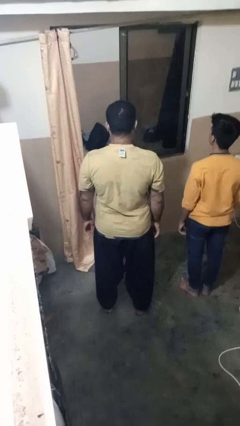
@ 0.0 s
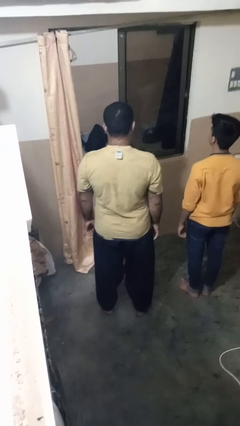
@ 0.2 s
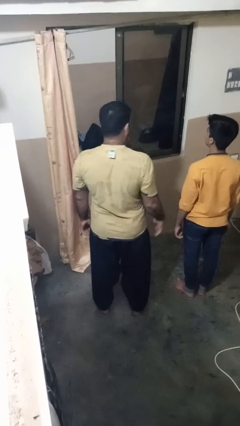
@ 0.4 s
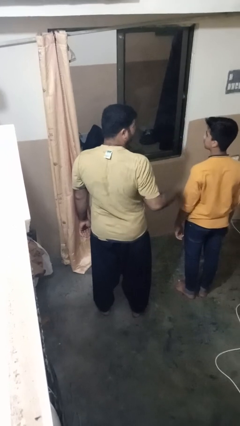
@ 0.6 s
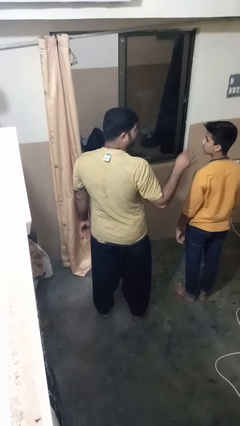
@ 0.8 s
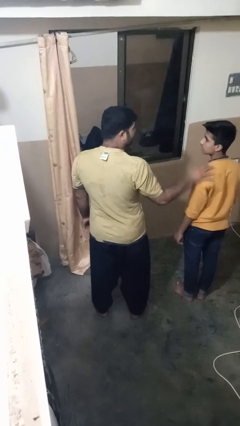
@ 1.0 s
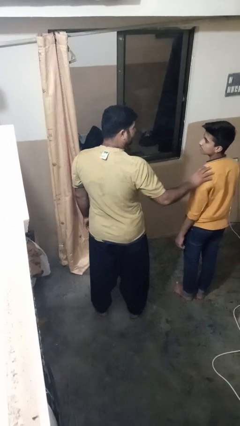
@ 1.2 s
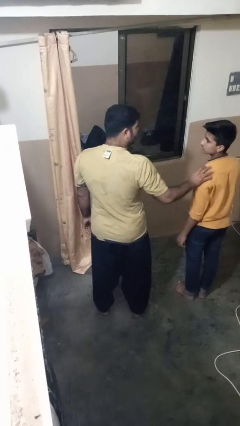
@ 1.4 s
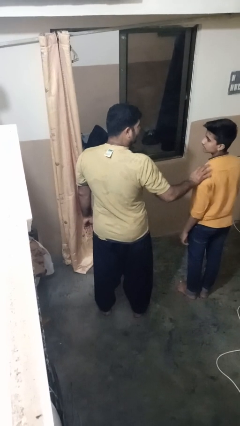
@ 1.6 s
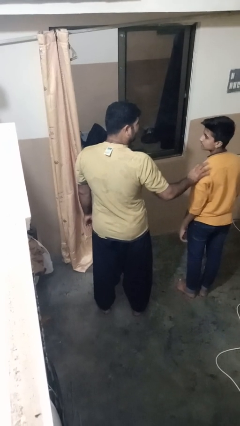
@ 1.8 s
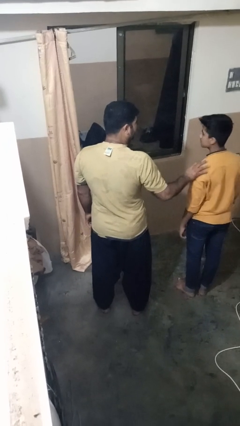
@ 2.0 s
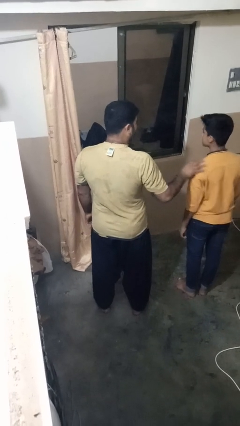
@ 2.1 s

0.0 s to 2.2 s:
person pounds shoulders of person

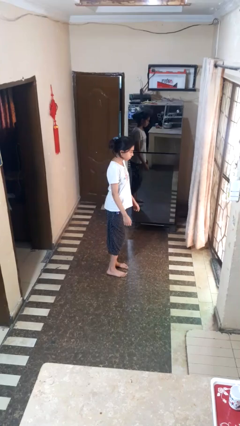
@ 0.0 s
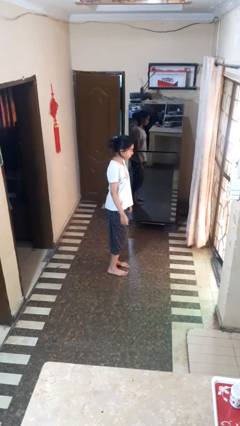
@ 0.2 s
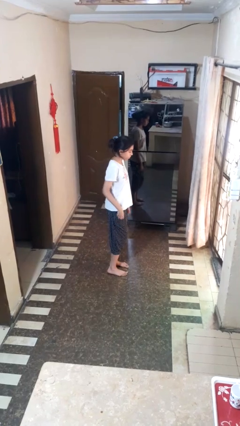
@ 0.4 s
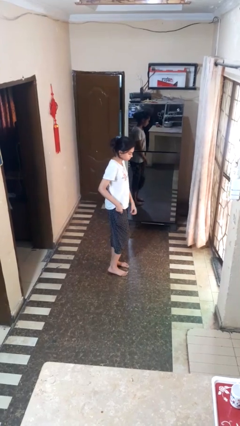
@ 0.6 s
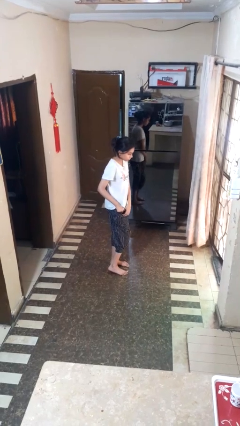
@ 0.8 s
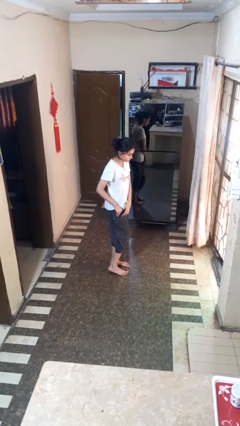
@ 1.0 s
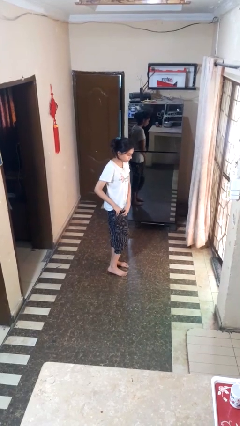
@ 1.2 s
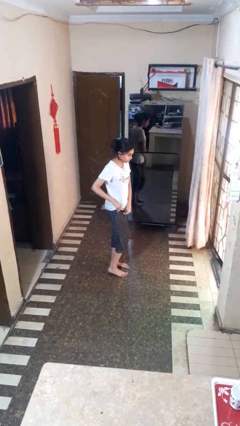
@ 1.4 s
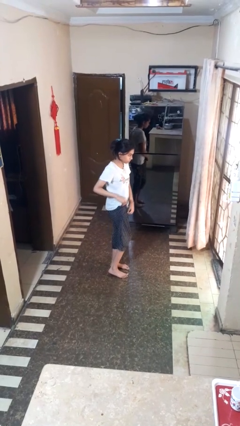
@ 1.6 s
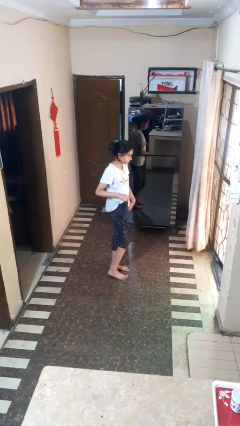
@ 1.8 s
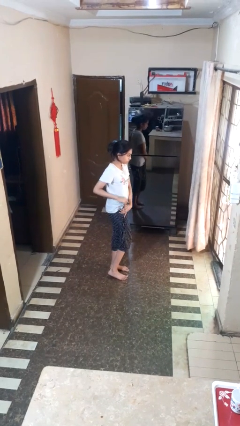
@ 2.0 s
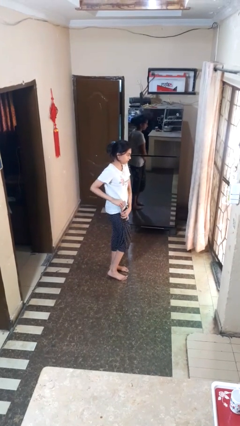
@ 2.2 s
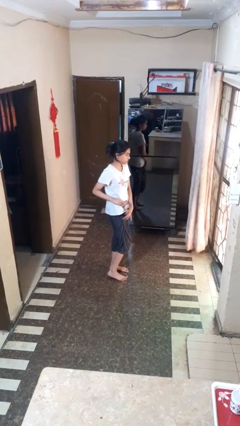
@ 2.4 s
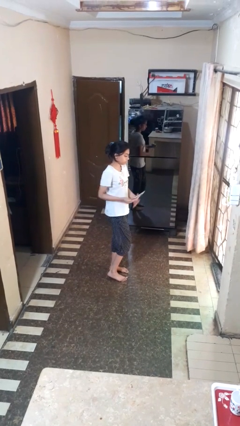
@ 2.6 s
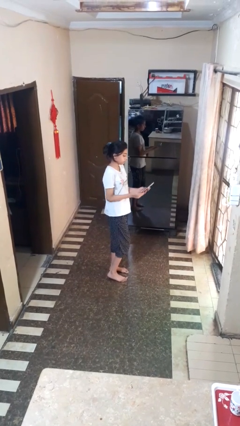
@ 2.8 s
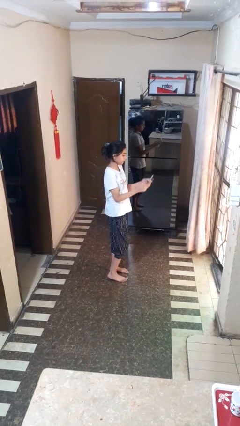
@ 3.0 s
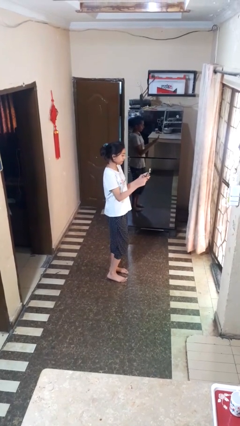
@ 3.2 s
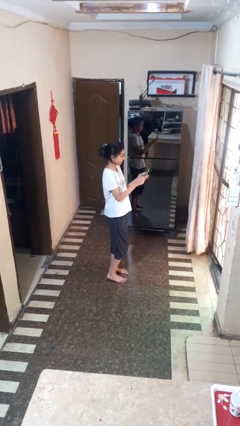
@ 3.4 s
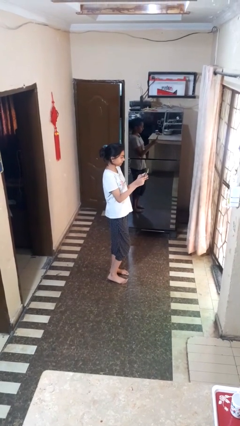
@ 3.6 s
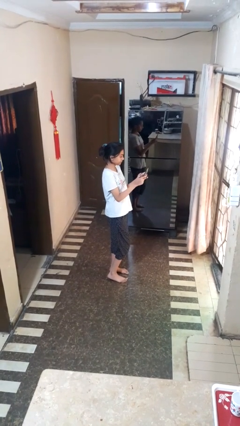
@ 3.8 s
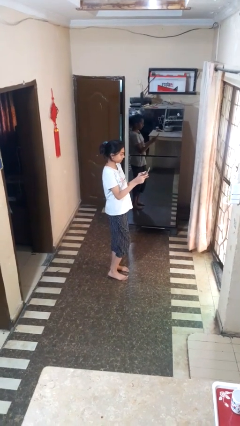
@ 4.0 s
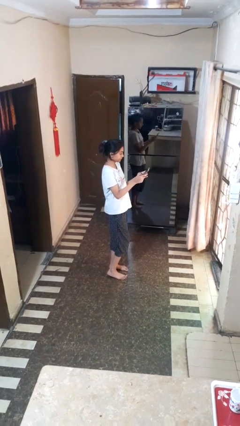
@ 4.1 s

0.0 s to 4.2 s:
person takes phone from pocket

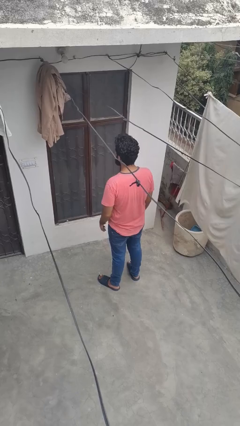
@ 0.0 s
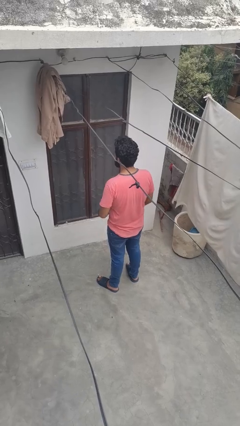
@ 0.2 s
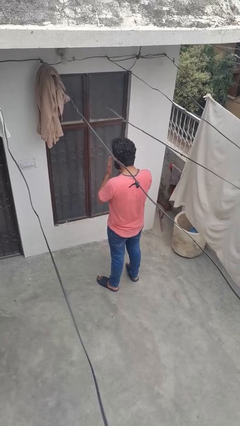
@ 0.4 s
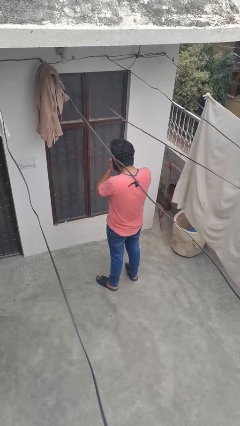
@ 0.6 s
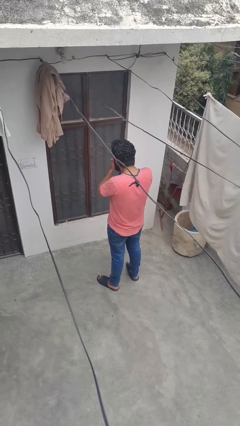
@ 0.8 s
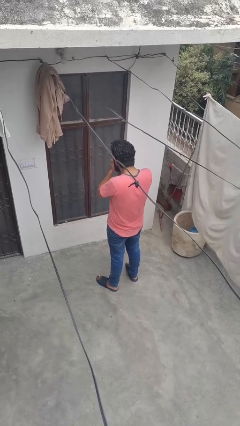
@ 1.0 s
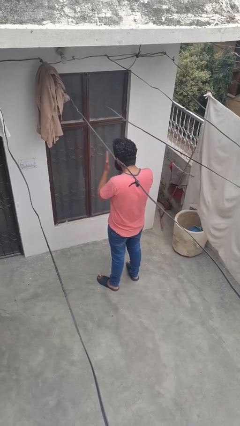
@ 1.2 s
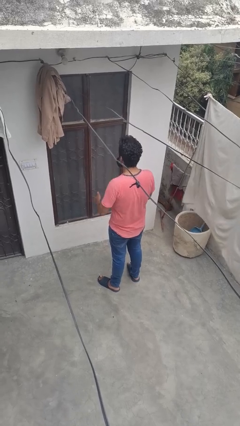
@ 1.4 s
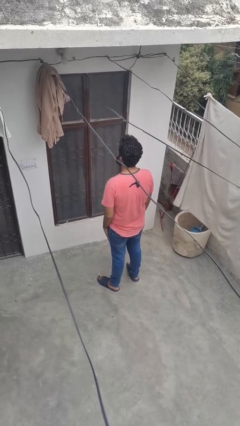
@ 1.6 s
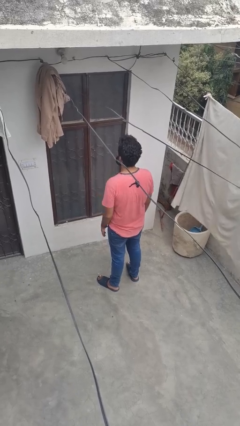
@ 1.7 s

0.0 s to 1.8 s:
person covers face with hands

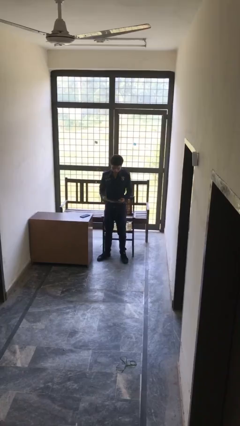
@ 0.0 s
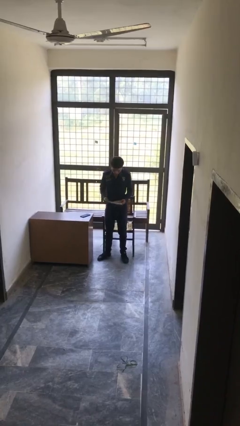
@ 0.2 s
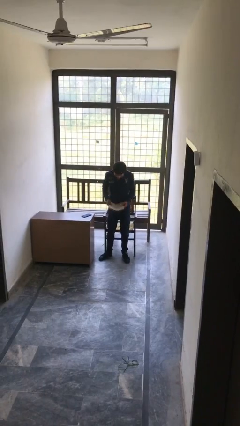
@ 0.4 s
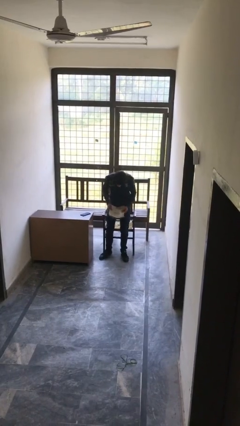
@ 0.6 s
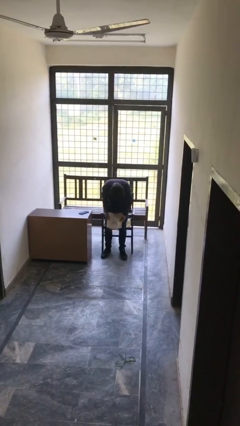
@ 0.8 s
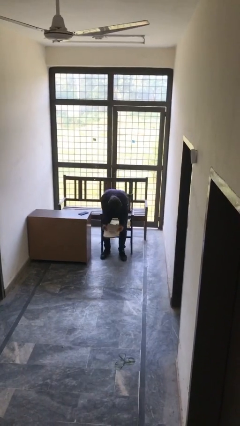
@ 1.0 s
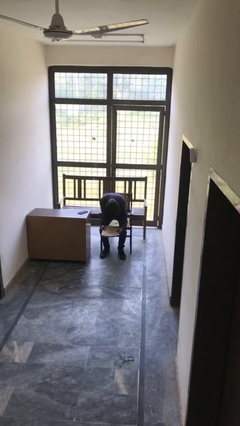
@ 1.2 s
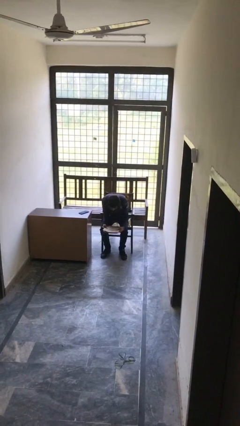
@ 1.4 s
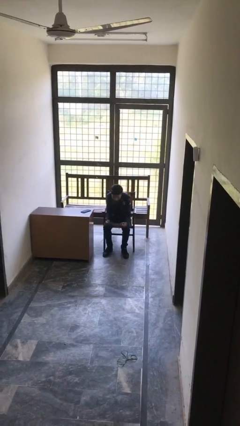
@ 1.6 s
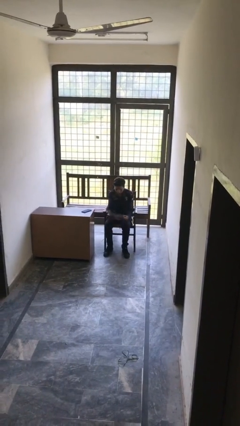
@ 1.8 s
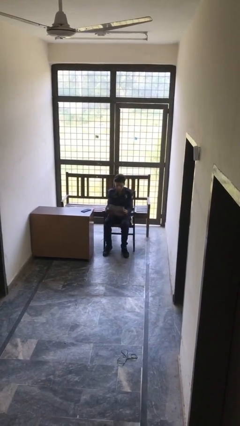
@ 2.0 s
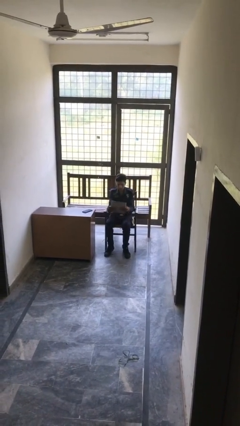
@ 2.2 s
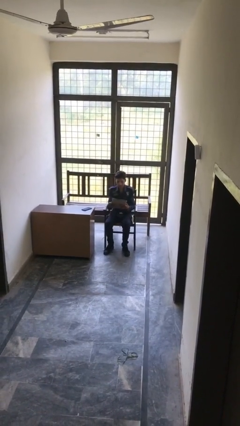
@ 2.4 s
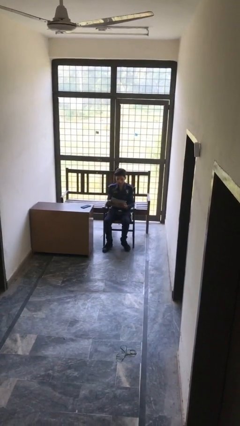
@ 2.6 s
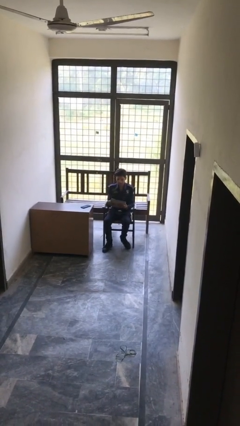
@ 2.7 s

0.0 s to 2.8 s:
person sits down

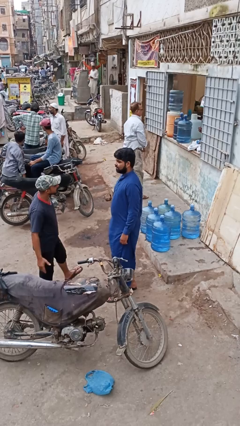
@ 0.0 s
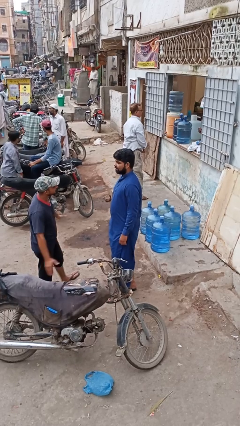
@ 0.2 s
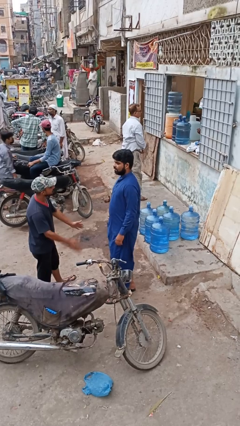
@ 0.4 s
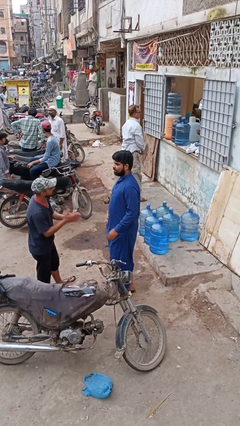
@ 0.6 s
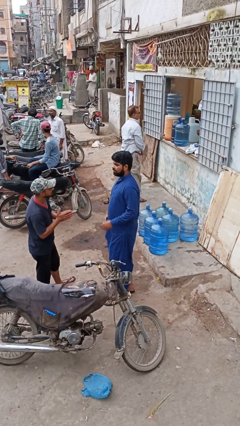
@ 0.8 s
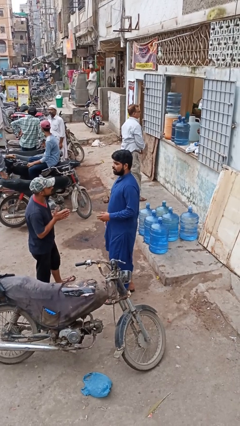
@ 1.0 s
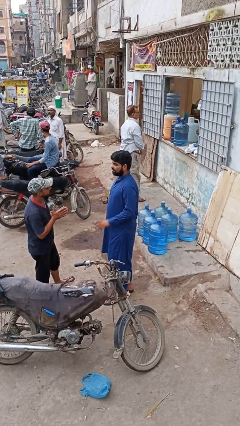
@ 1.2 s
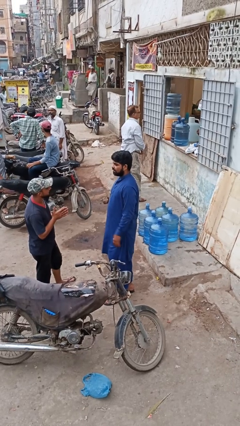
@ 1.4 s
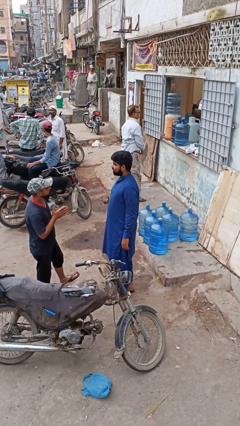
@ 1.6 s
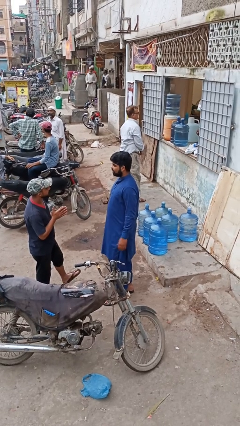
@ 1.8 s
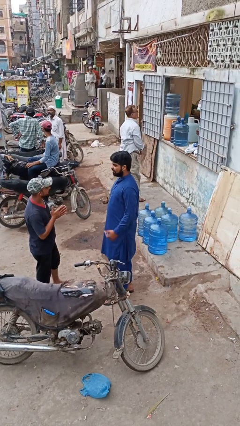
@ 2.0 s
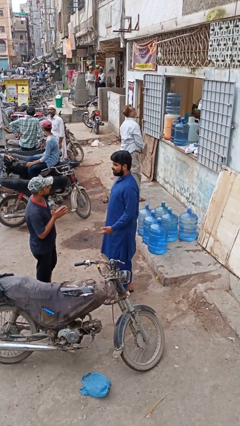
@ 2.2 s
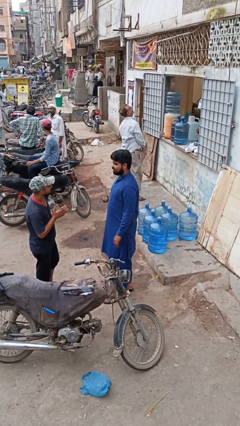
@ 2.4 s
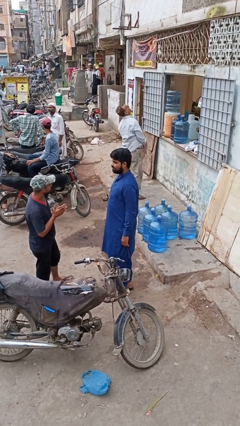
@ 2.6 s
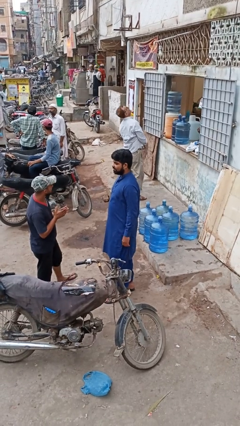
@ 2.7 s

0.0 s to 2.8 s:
person talks to person

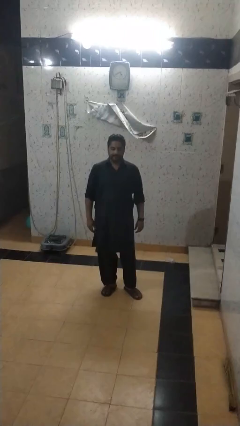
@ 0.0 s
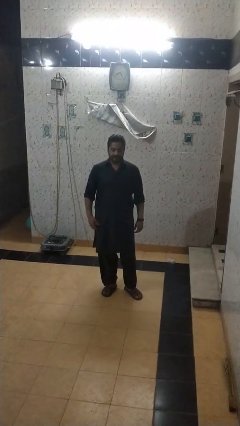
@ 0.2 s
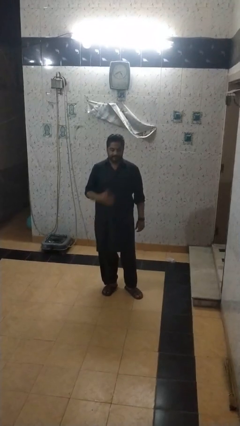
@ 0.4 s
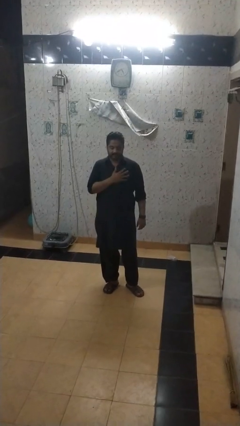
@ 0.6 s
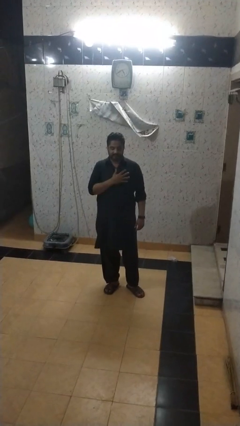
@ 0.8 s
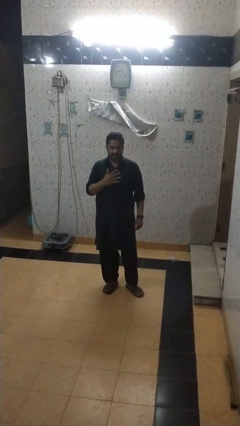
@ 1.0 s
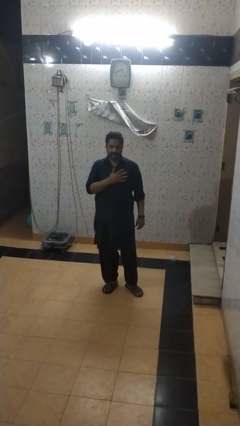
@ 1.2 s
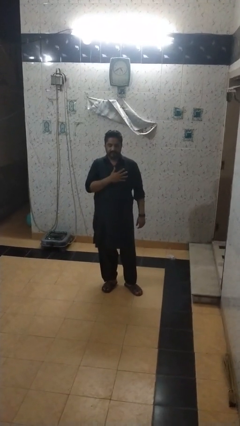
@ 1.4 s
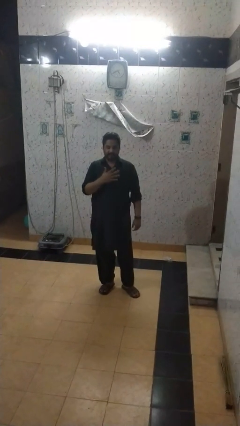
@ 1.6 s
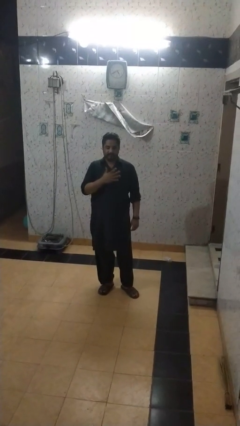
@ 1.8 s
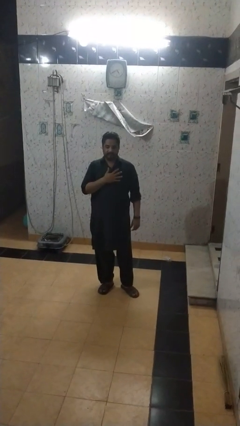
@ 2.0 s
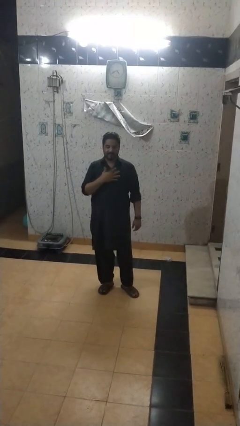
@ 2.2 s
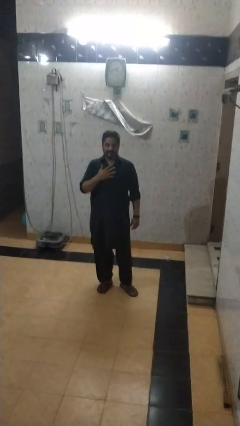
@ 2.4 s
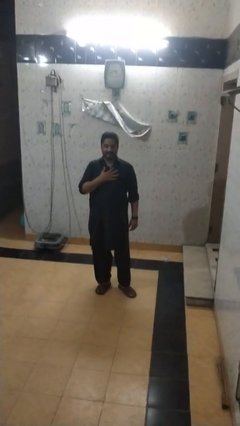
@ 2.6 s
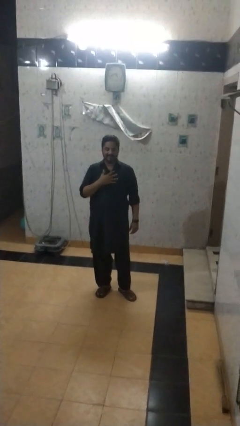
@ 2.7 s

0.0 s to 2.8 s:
person drums on chest

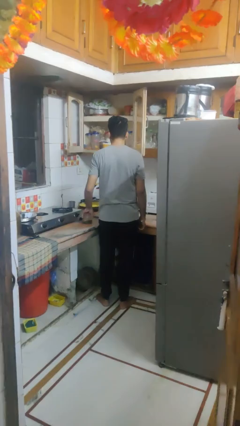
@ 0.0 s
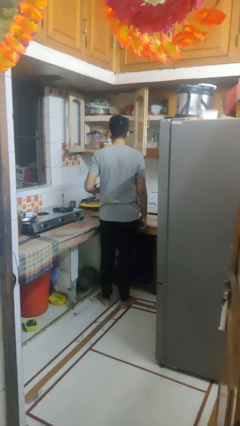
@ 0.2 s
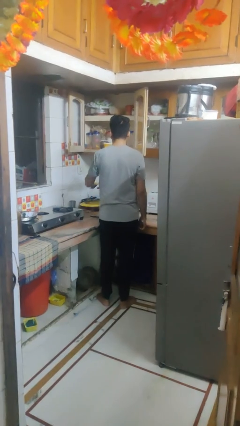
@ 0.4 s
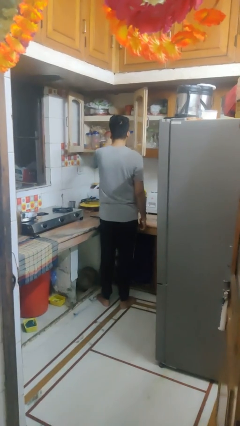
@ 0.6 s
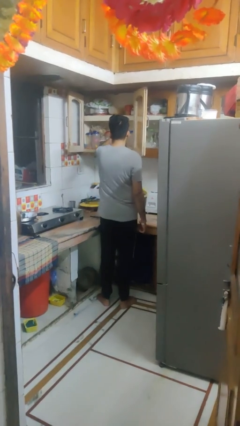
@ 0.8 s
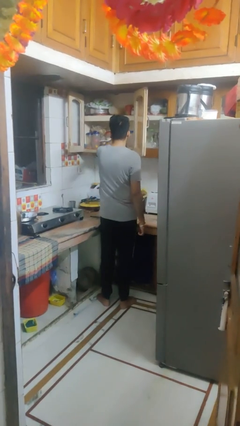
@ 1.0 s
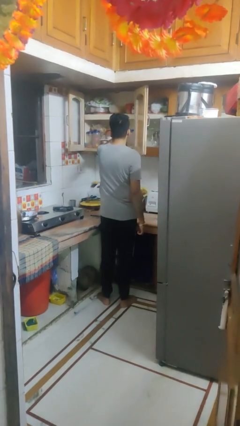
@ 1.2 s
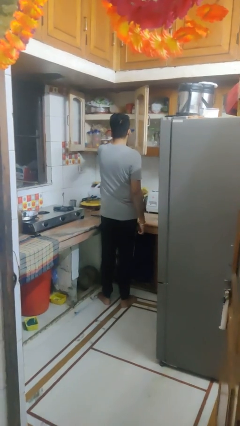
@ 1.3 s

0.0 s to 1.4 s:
person puts object in cabinet
